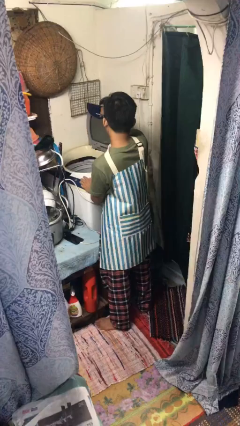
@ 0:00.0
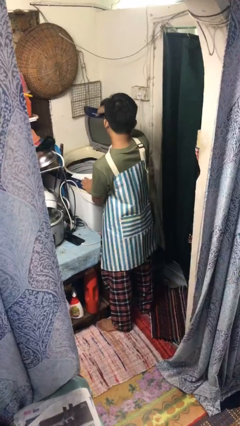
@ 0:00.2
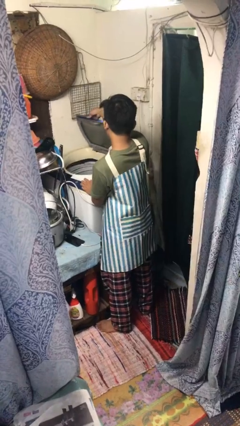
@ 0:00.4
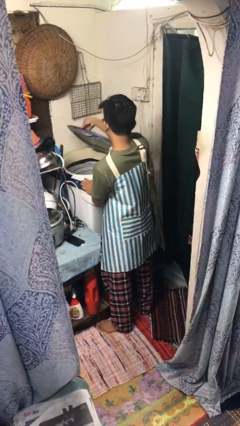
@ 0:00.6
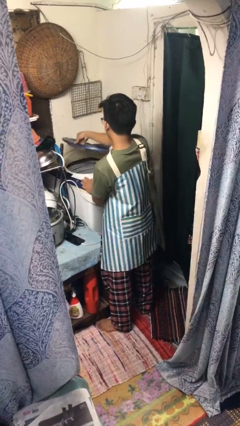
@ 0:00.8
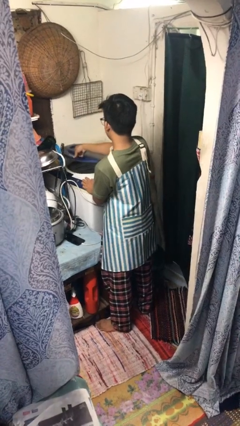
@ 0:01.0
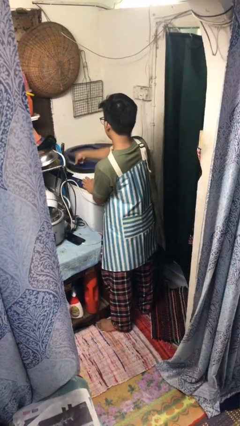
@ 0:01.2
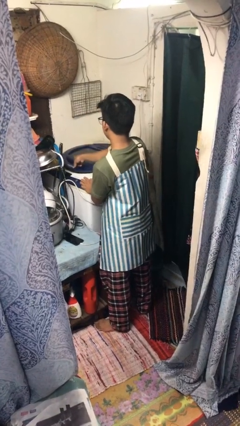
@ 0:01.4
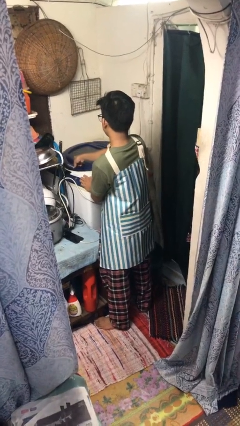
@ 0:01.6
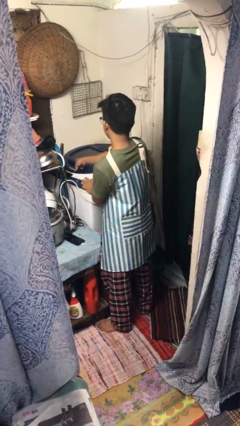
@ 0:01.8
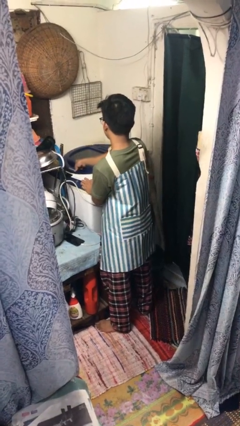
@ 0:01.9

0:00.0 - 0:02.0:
person closes clothes washer

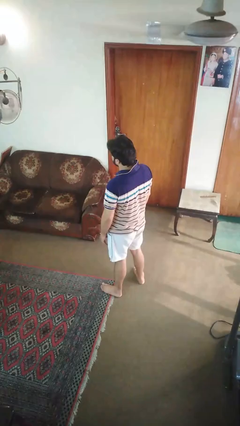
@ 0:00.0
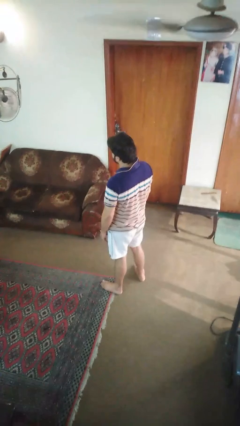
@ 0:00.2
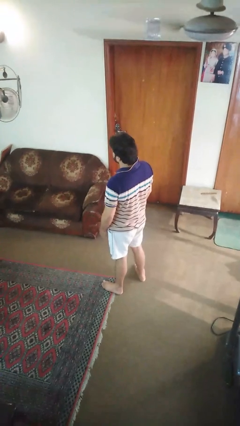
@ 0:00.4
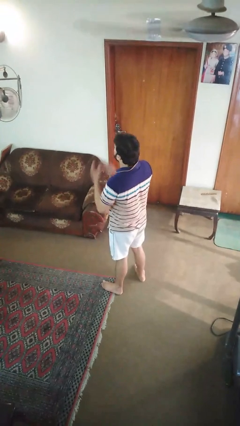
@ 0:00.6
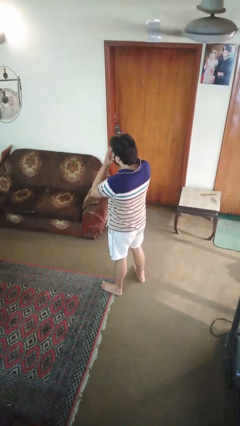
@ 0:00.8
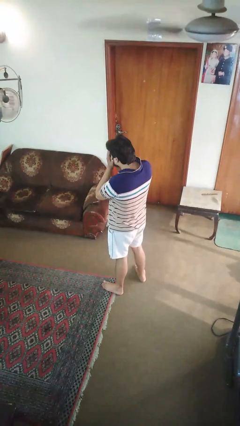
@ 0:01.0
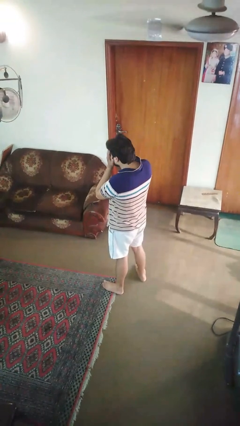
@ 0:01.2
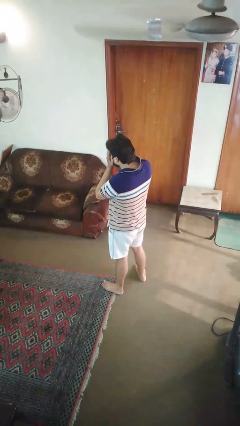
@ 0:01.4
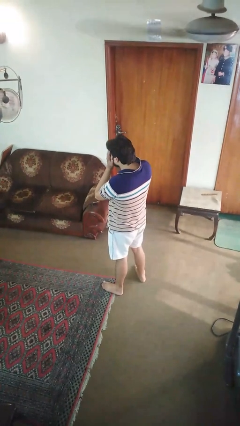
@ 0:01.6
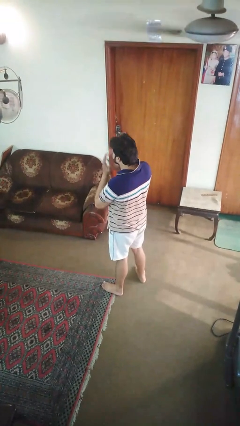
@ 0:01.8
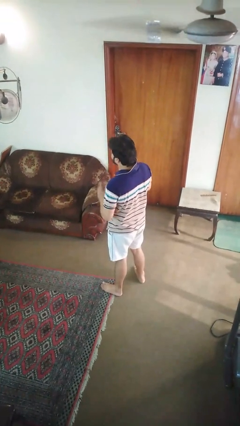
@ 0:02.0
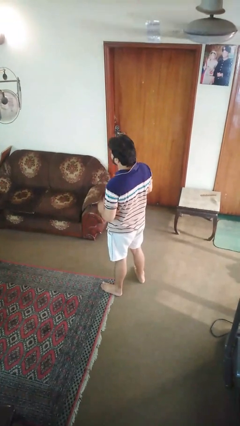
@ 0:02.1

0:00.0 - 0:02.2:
person sneezes into hand

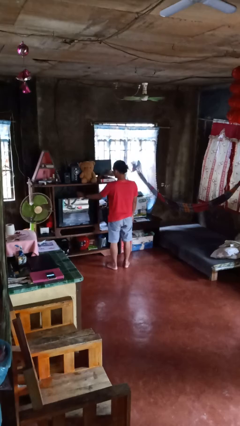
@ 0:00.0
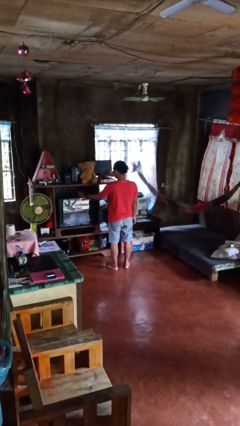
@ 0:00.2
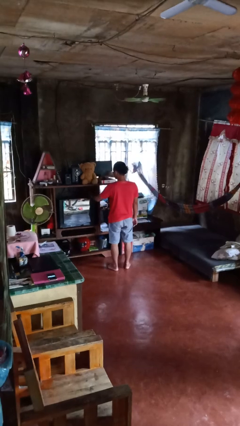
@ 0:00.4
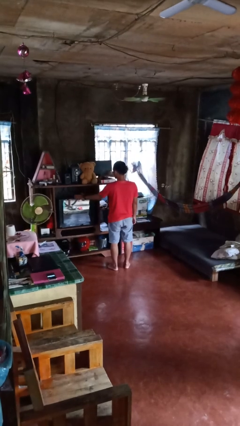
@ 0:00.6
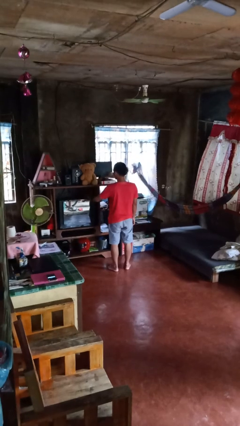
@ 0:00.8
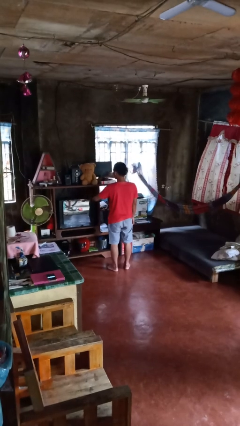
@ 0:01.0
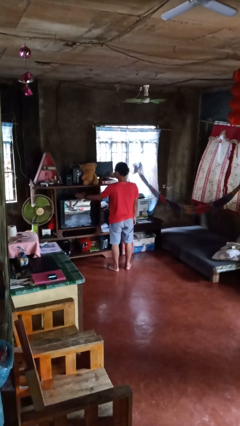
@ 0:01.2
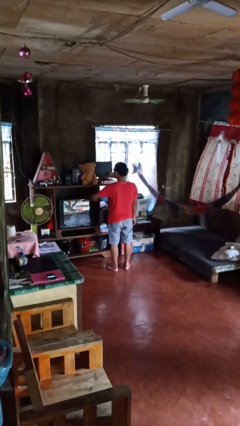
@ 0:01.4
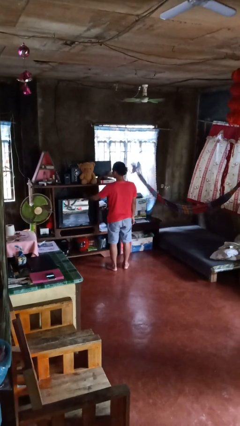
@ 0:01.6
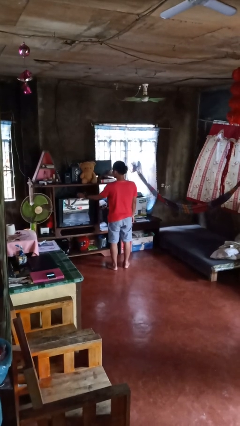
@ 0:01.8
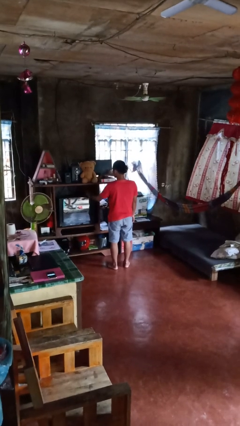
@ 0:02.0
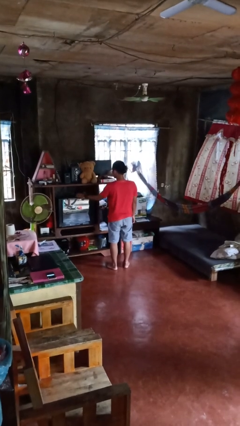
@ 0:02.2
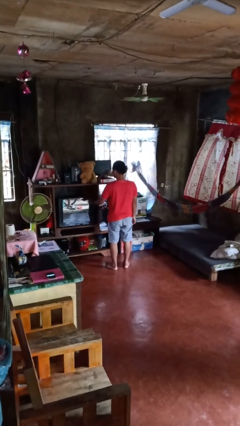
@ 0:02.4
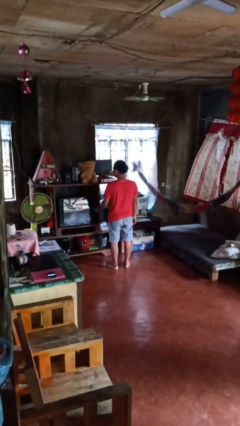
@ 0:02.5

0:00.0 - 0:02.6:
person waves hand over object

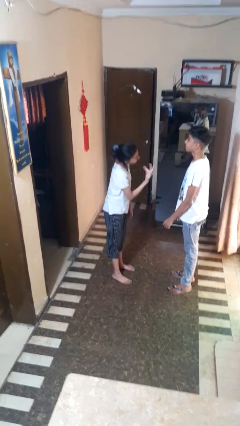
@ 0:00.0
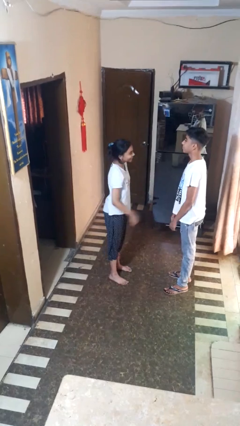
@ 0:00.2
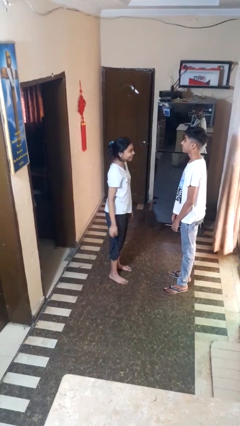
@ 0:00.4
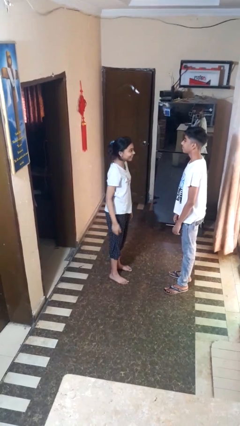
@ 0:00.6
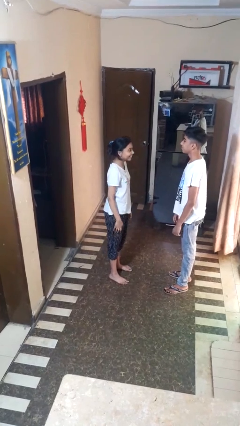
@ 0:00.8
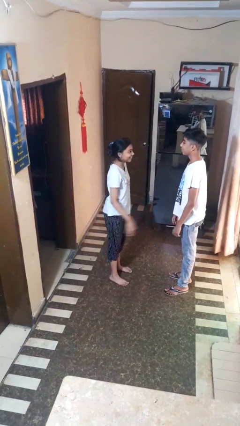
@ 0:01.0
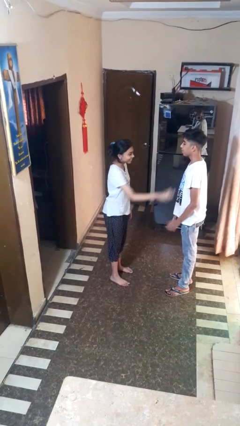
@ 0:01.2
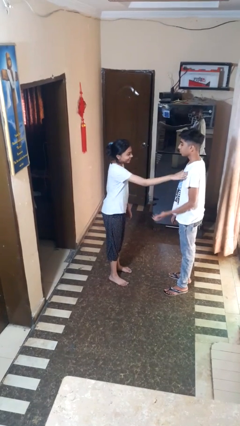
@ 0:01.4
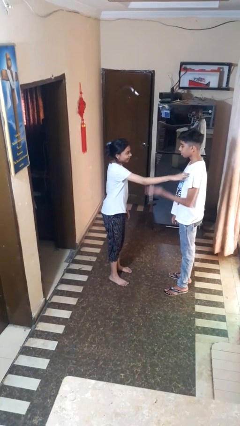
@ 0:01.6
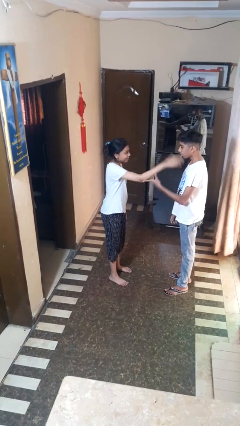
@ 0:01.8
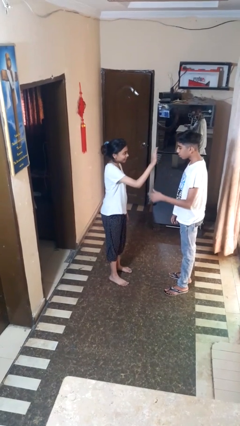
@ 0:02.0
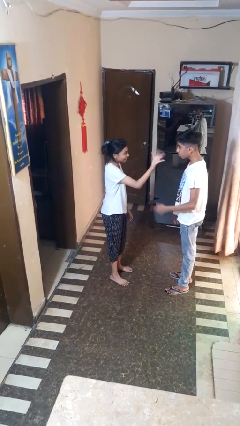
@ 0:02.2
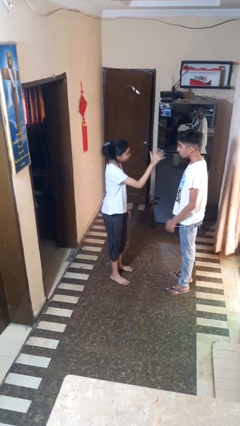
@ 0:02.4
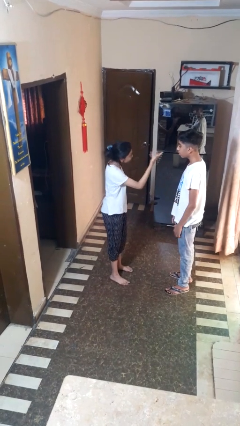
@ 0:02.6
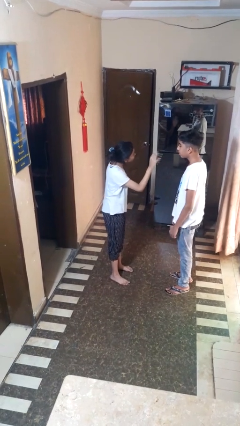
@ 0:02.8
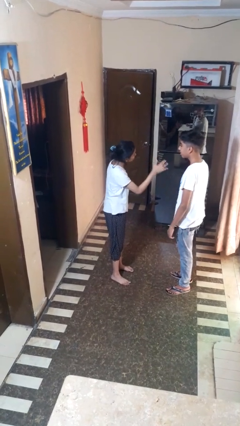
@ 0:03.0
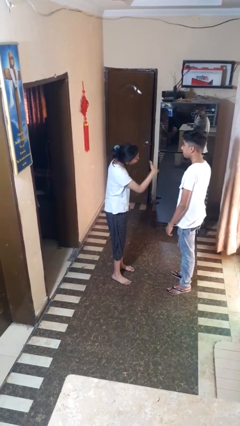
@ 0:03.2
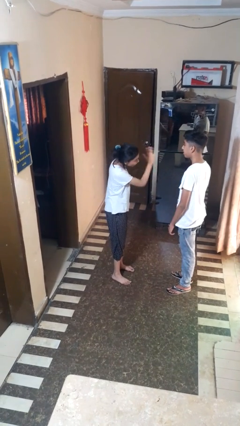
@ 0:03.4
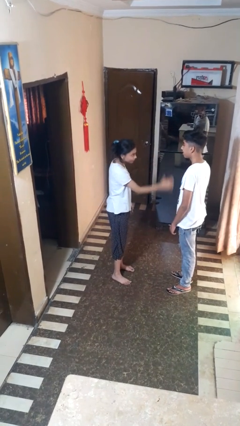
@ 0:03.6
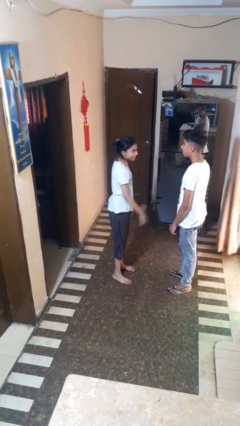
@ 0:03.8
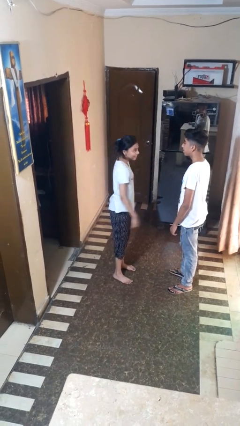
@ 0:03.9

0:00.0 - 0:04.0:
person shoves person

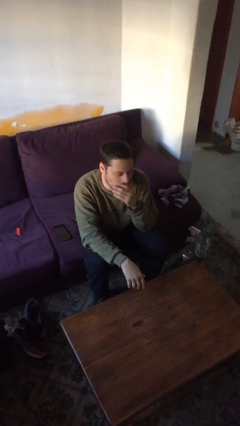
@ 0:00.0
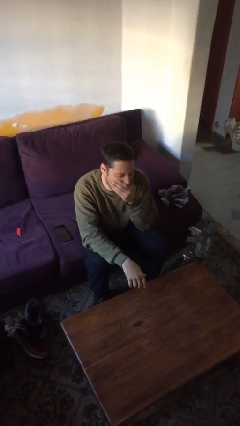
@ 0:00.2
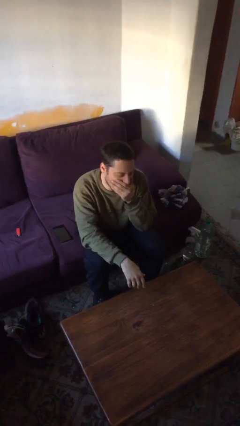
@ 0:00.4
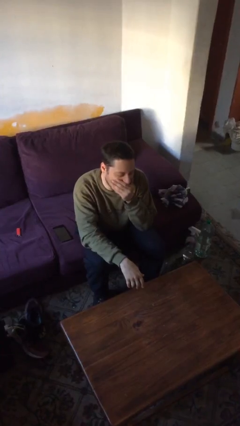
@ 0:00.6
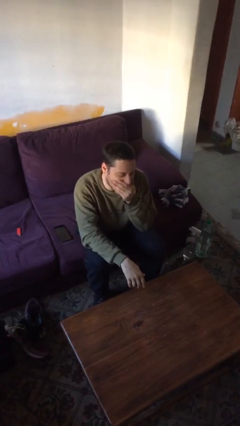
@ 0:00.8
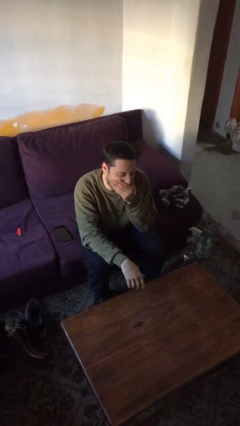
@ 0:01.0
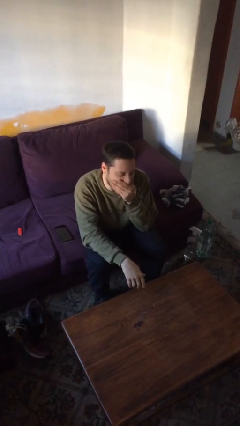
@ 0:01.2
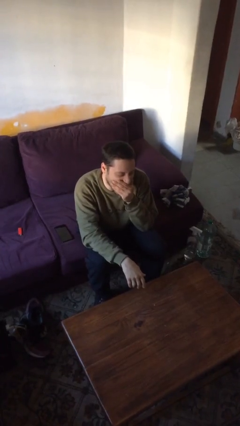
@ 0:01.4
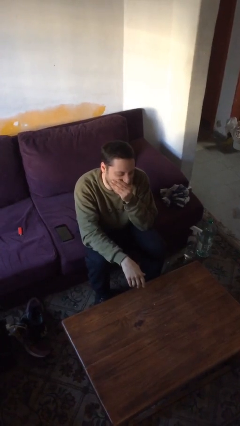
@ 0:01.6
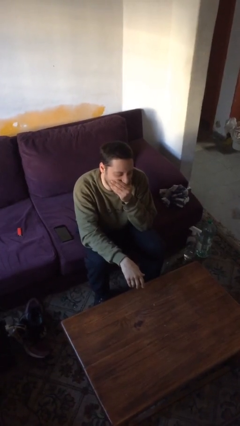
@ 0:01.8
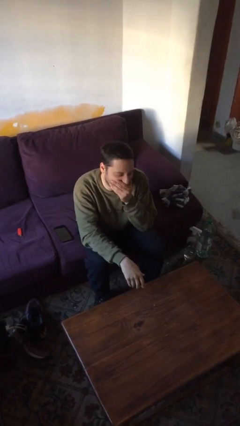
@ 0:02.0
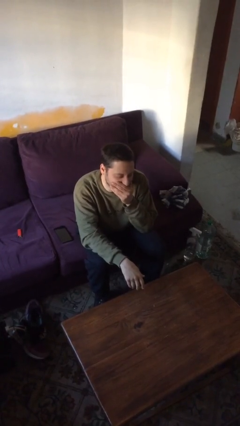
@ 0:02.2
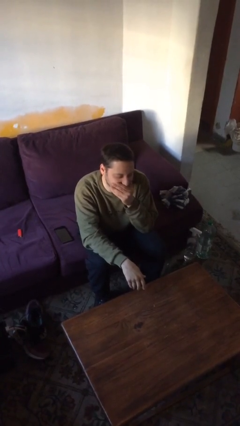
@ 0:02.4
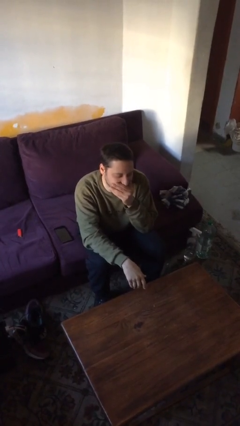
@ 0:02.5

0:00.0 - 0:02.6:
person yawns

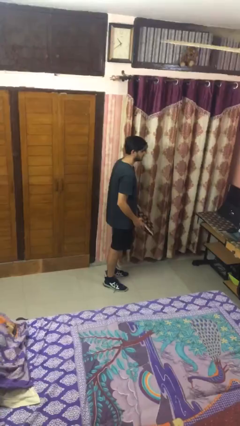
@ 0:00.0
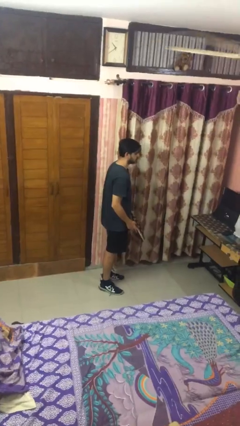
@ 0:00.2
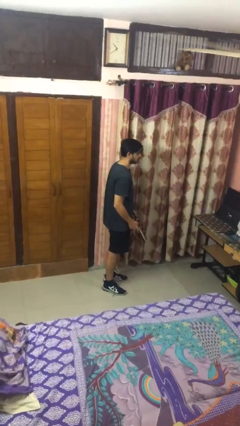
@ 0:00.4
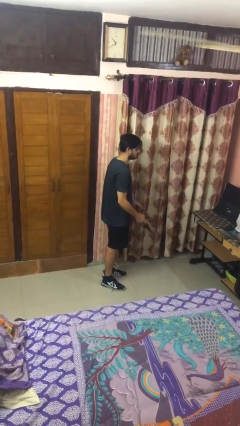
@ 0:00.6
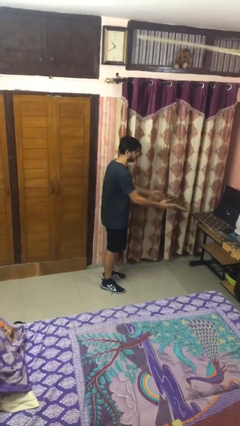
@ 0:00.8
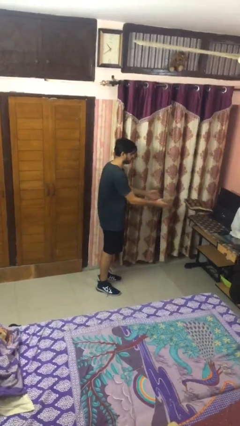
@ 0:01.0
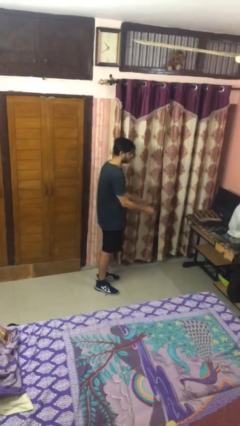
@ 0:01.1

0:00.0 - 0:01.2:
person throws object on table

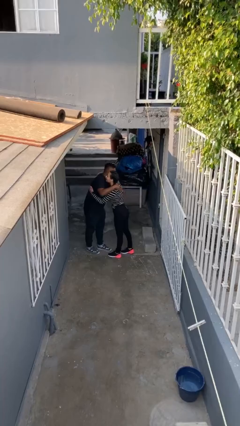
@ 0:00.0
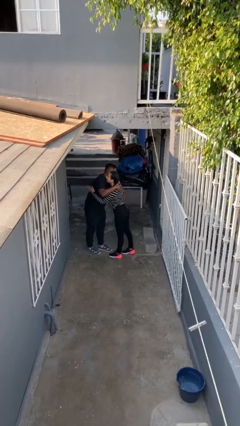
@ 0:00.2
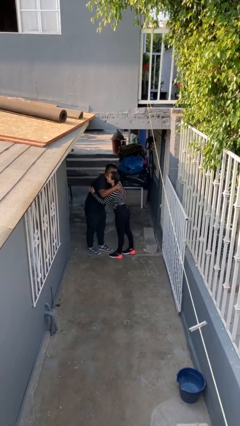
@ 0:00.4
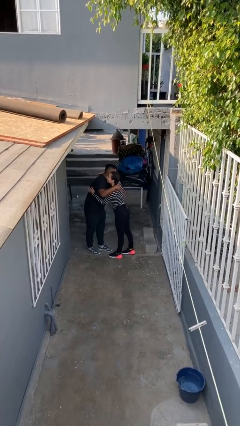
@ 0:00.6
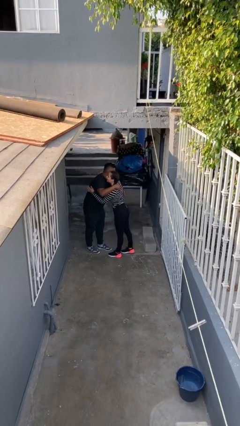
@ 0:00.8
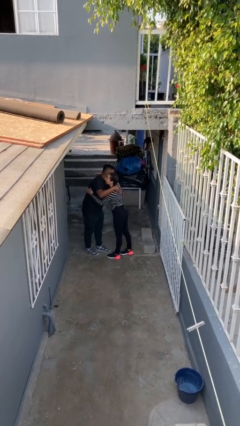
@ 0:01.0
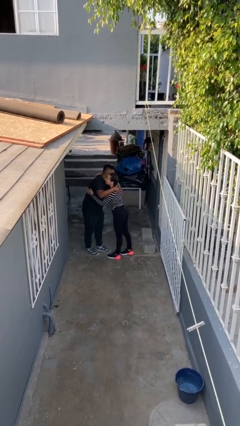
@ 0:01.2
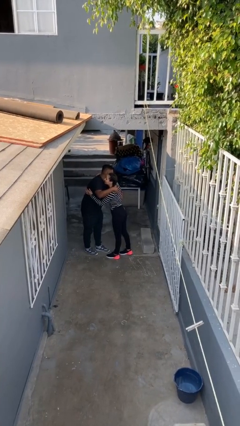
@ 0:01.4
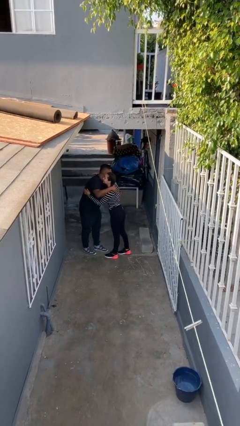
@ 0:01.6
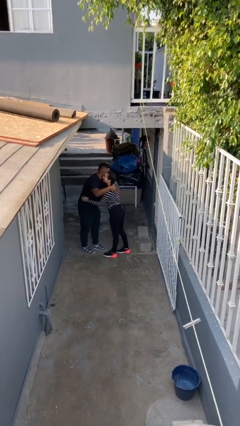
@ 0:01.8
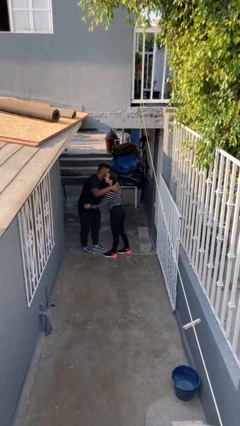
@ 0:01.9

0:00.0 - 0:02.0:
person embraces person

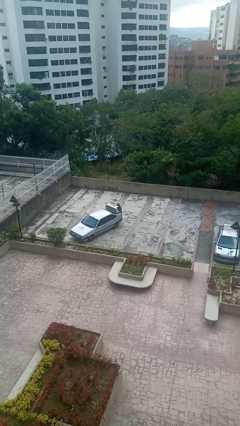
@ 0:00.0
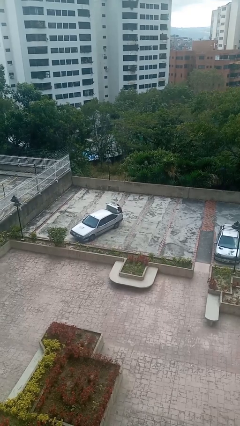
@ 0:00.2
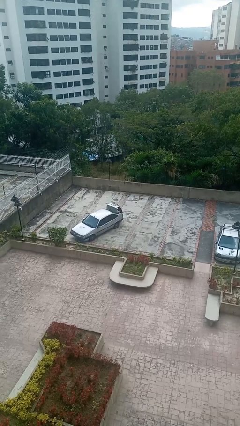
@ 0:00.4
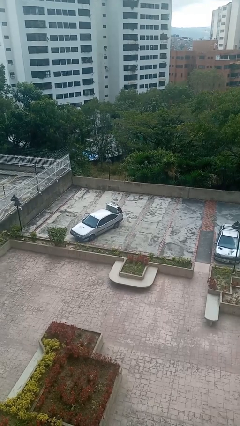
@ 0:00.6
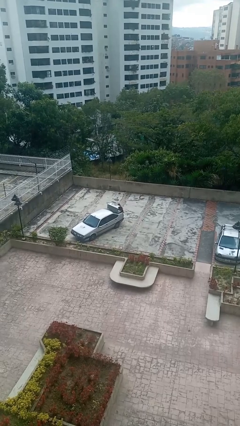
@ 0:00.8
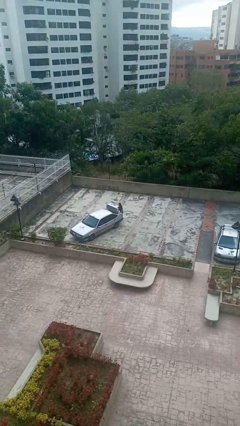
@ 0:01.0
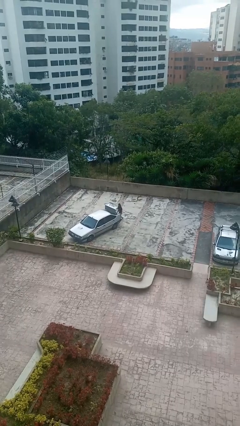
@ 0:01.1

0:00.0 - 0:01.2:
person loads car
